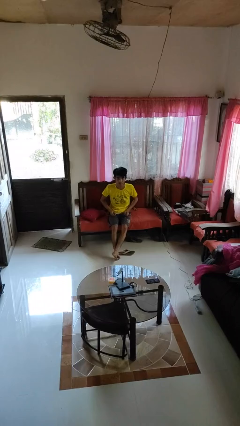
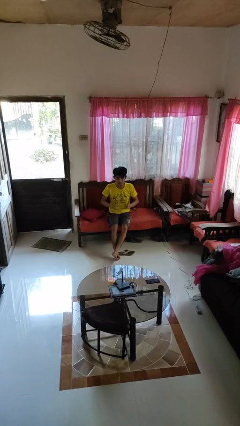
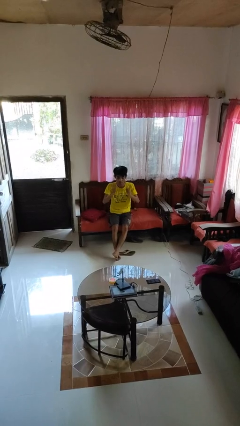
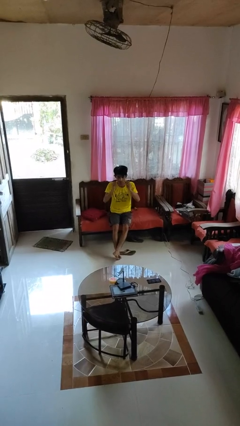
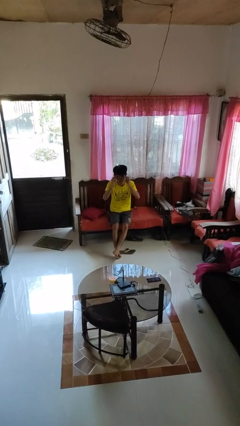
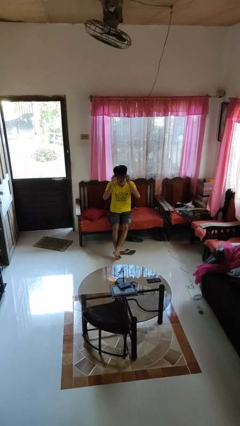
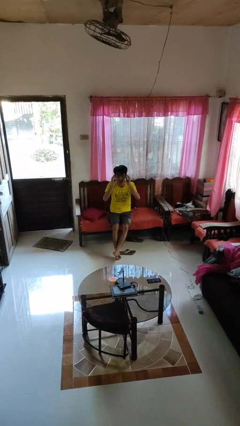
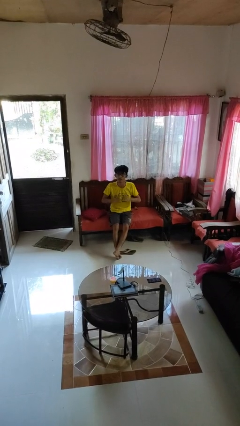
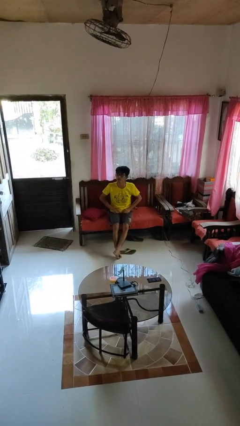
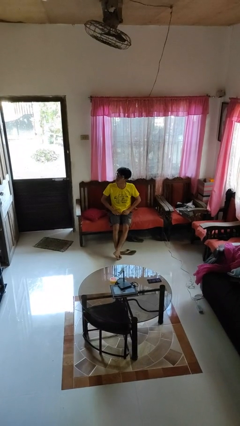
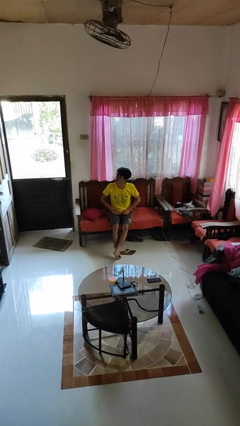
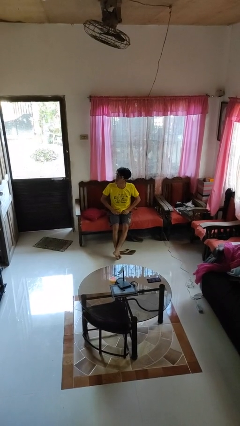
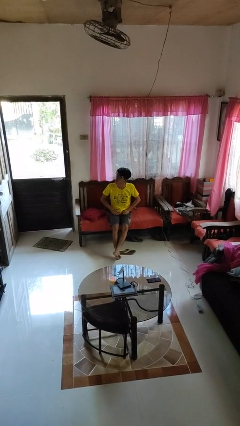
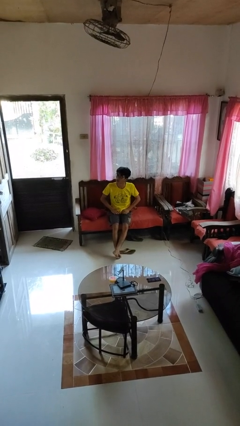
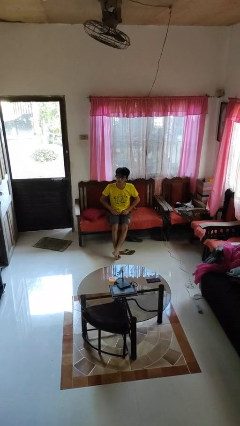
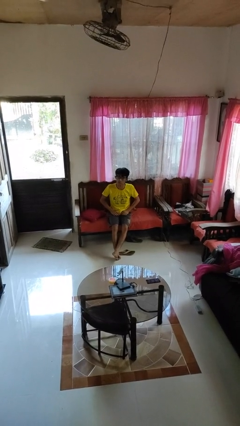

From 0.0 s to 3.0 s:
person puts on glasses

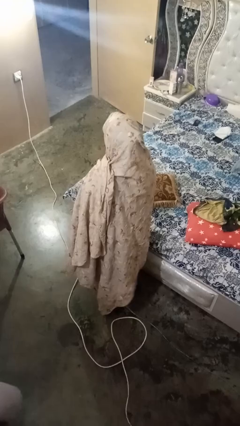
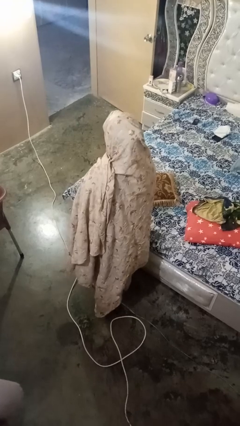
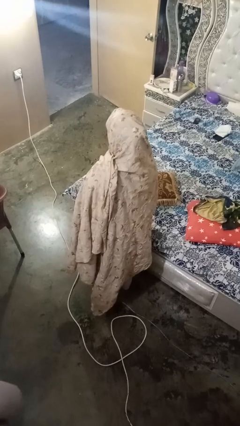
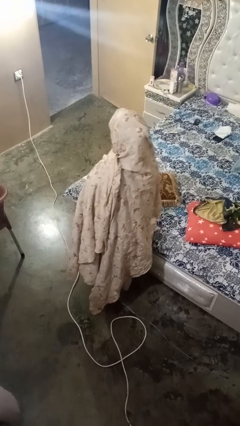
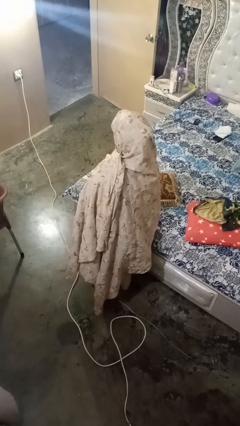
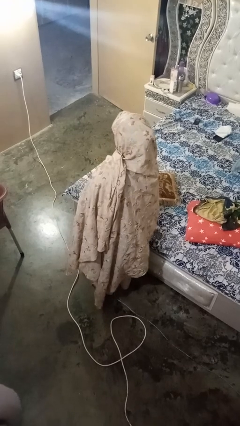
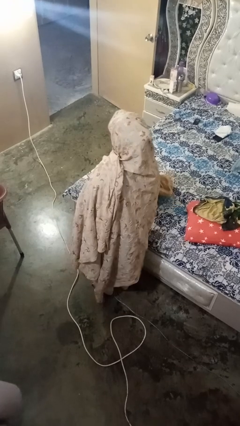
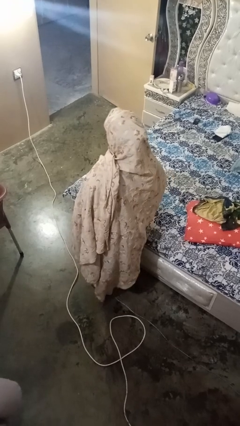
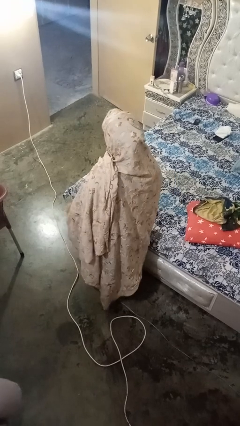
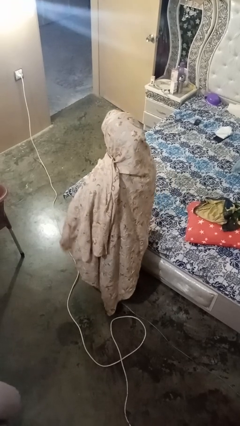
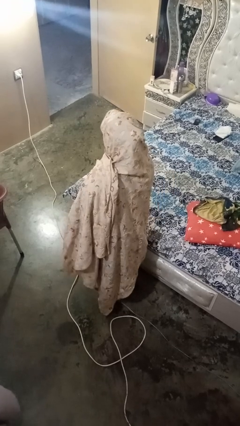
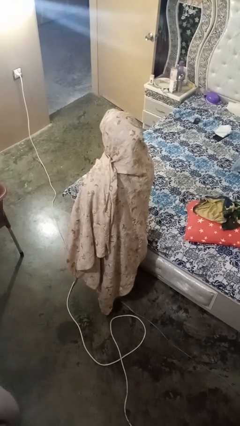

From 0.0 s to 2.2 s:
person picks up object from bed

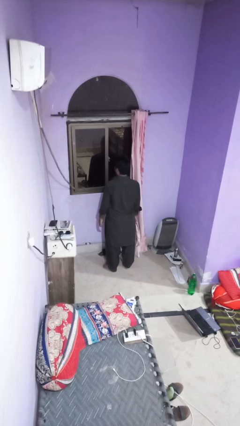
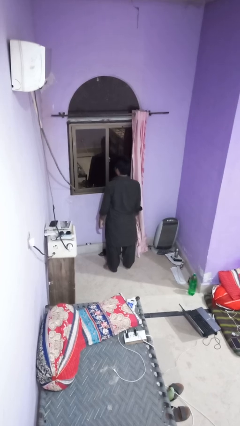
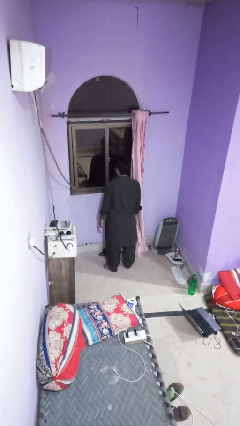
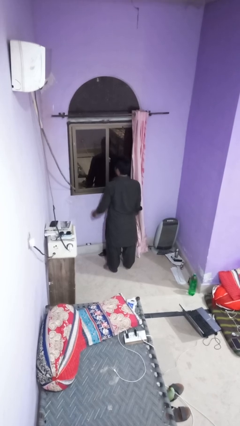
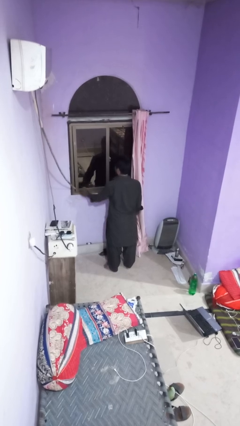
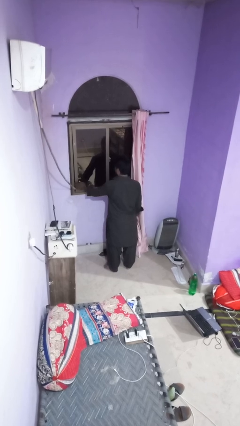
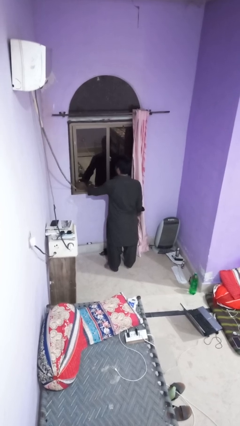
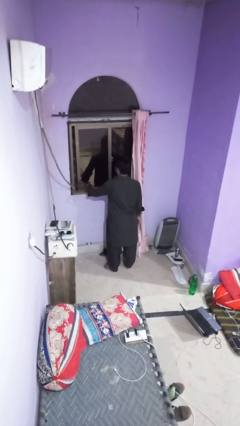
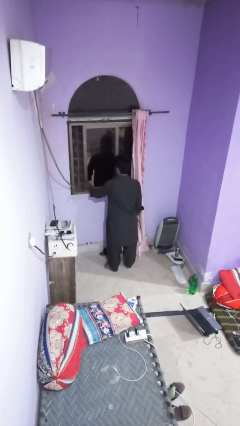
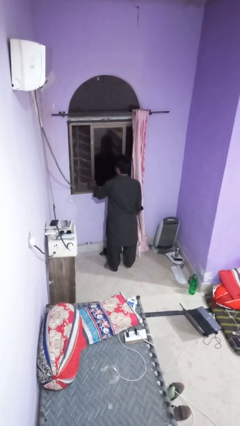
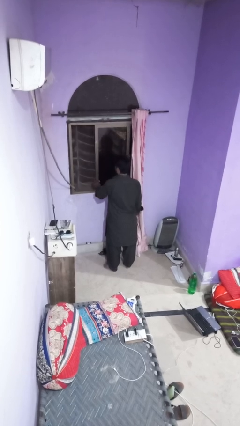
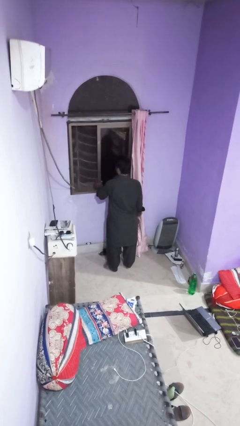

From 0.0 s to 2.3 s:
person opens home window

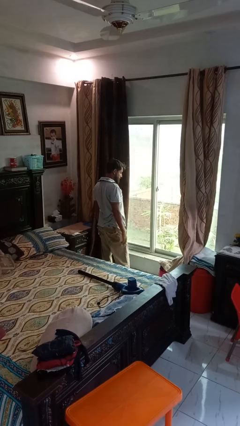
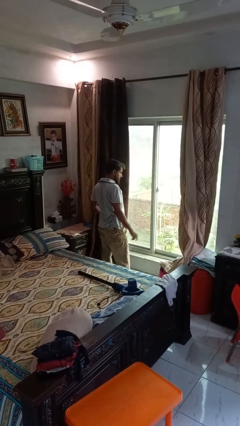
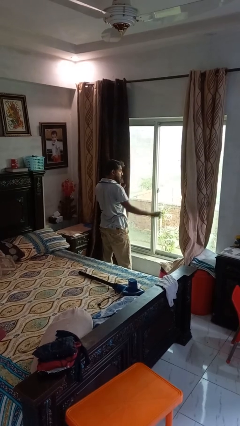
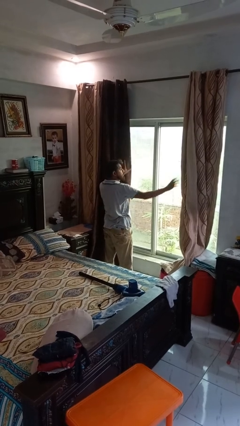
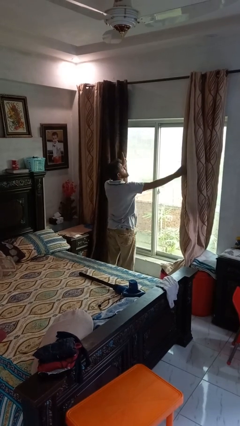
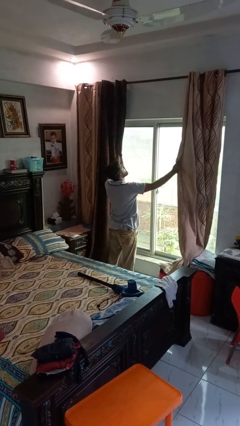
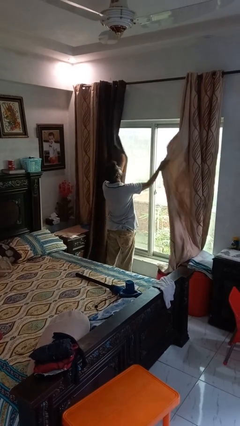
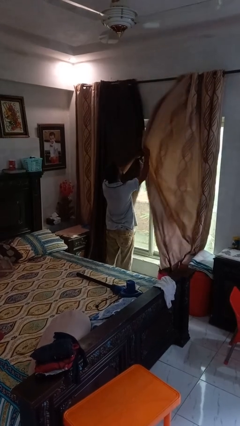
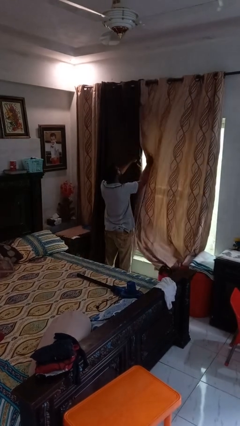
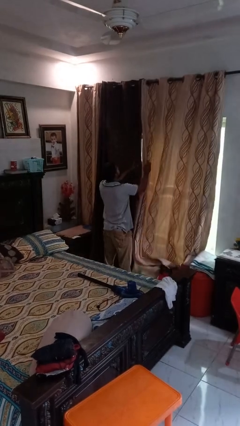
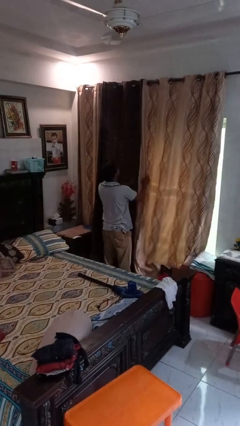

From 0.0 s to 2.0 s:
person closes curtains

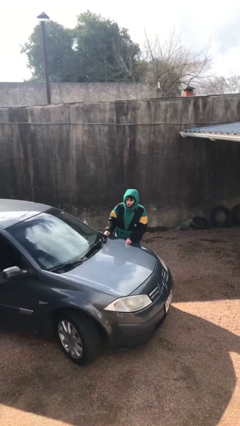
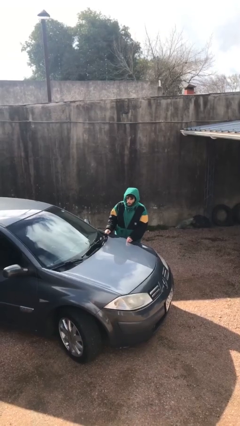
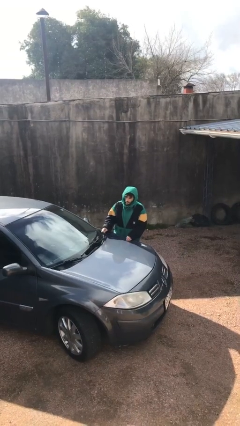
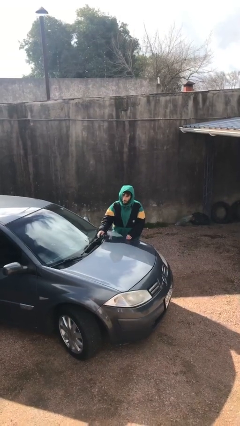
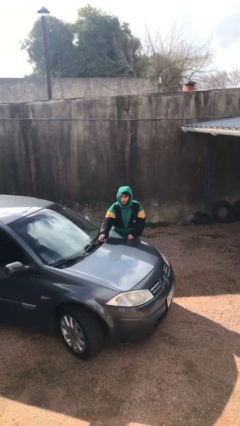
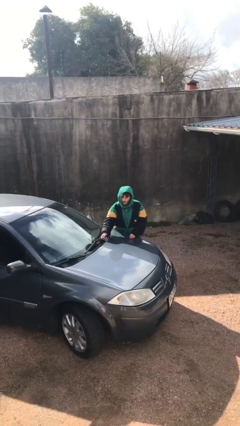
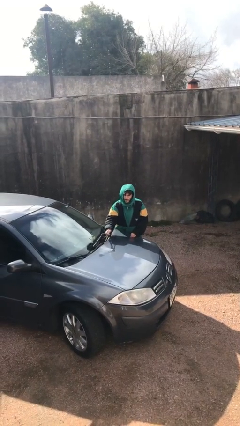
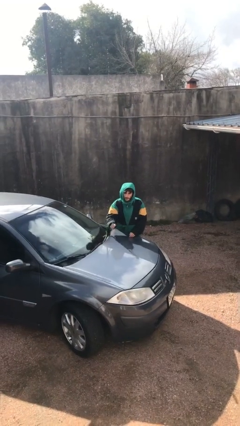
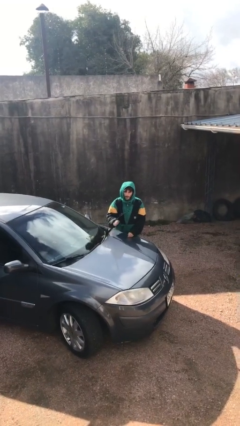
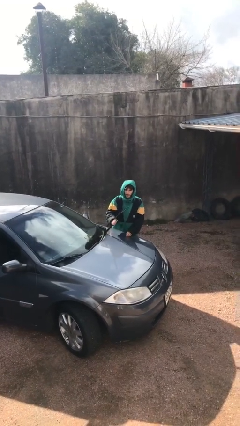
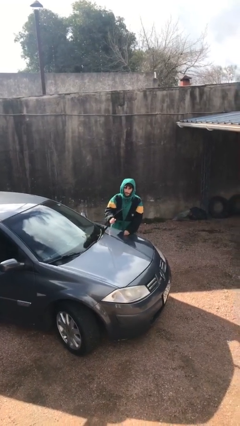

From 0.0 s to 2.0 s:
person flips up car wipers

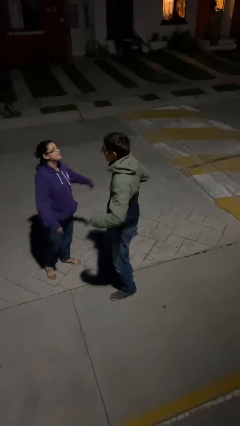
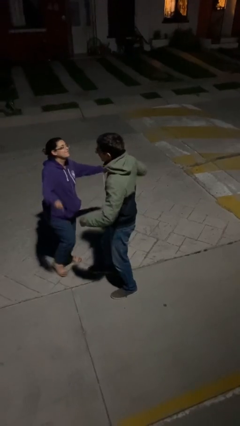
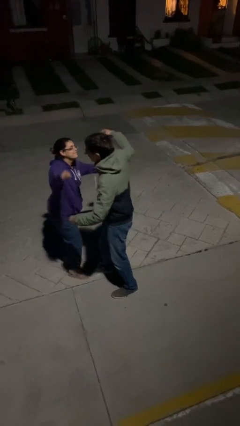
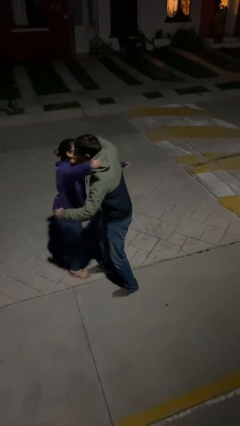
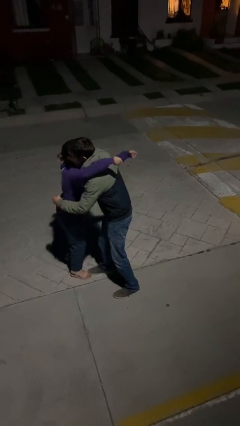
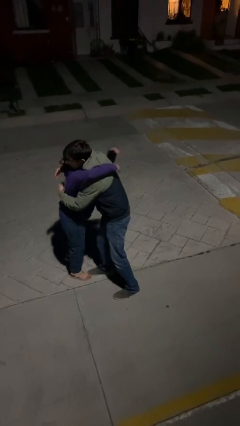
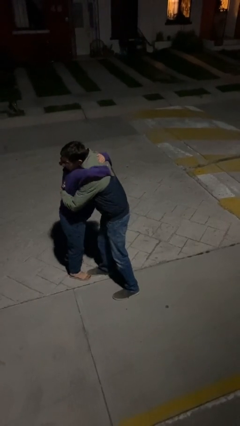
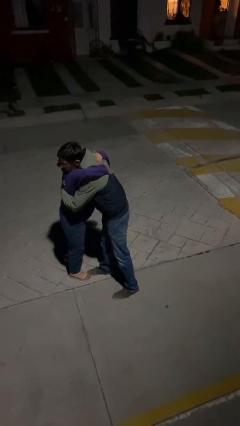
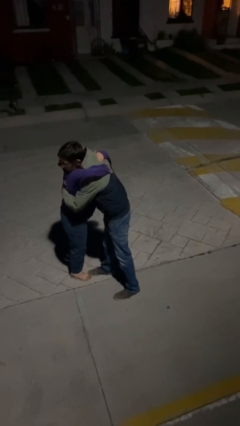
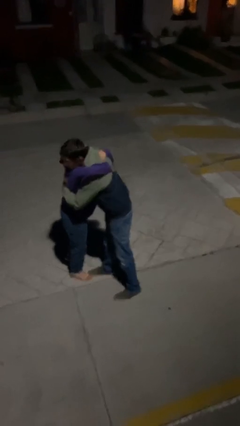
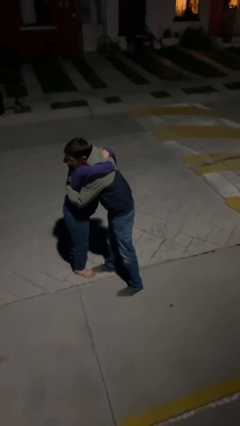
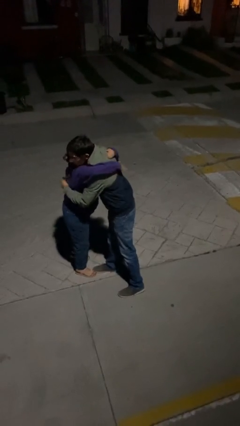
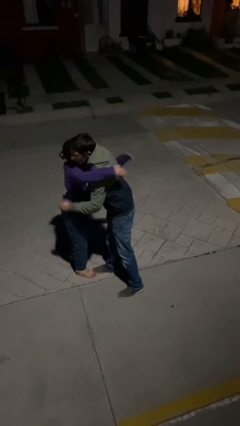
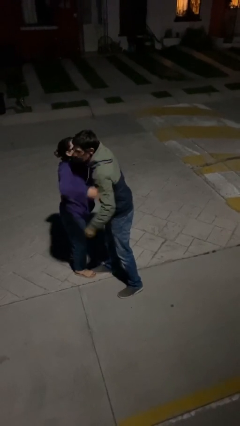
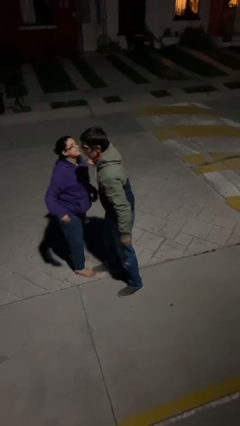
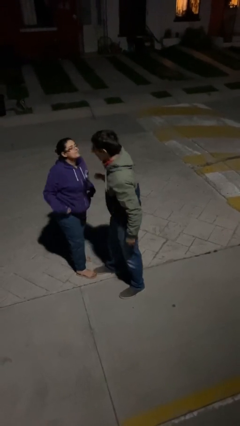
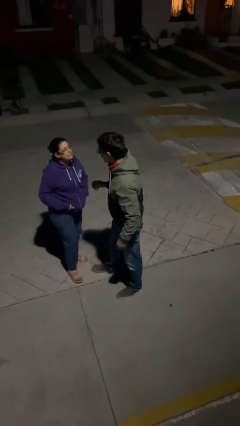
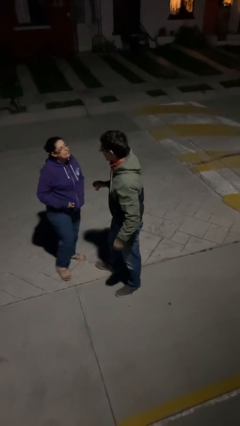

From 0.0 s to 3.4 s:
person embraces person

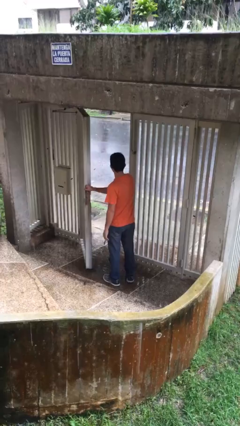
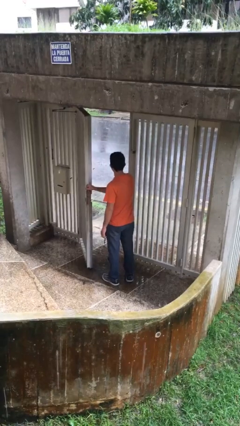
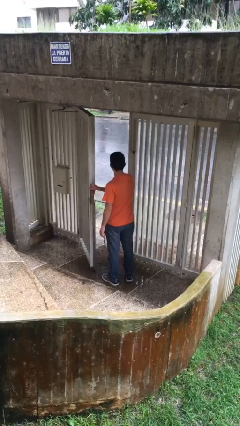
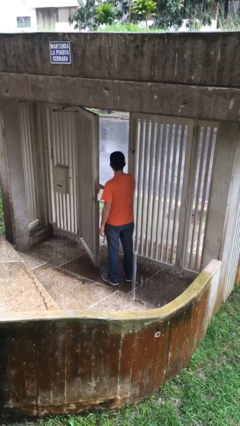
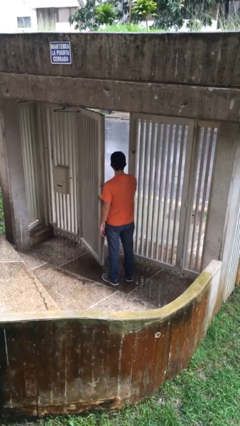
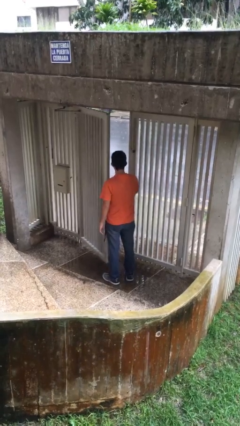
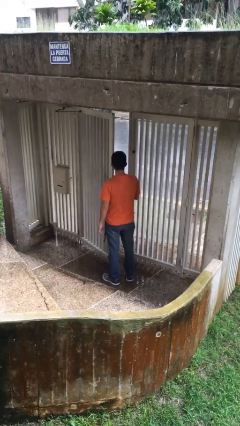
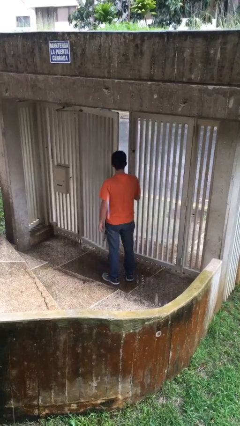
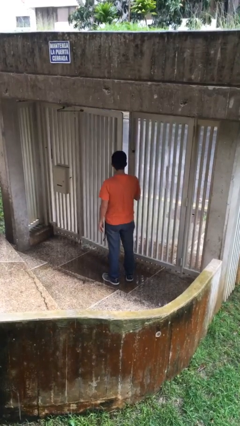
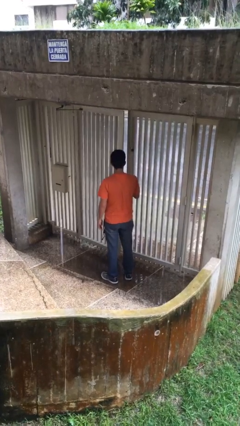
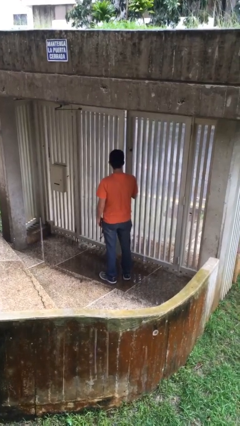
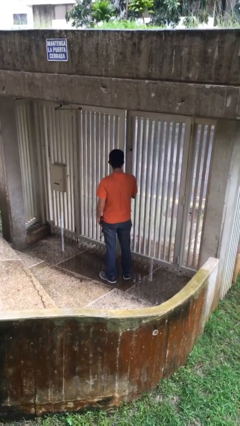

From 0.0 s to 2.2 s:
person closes facility door
